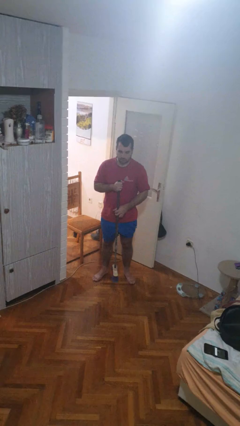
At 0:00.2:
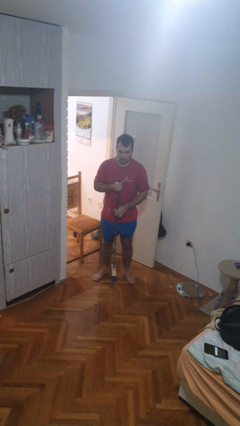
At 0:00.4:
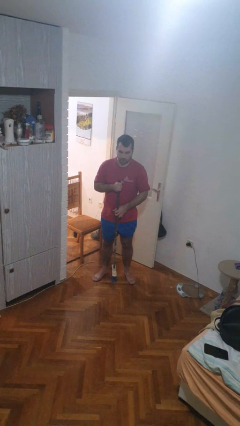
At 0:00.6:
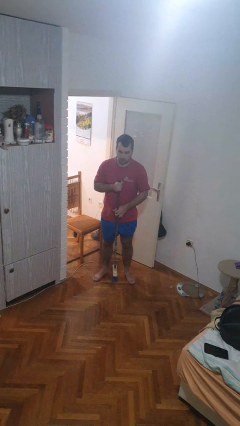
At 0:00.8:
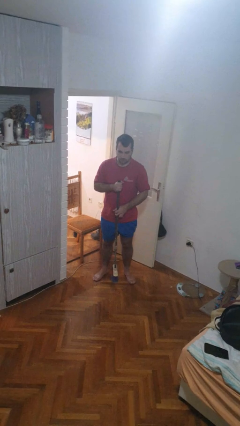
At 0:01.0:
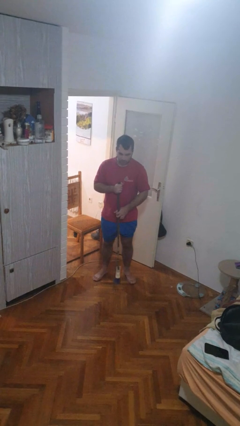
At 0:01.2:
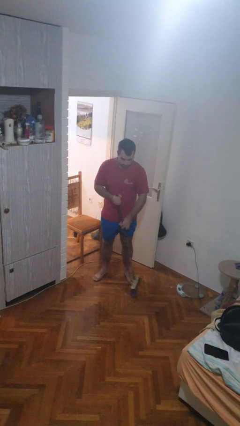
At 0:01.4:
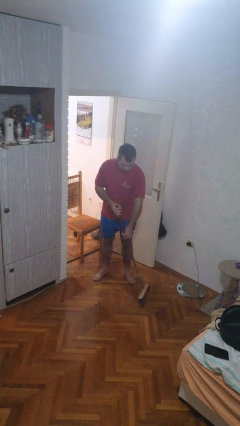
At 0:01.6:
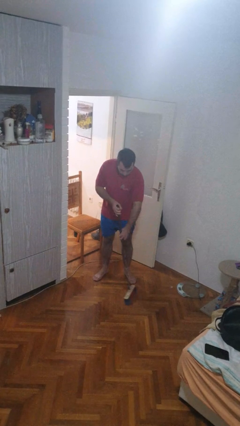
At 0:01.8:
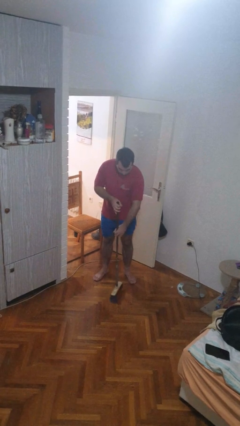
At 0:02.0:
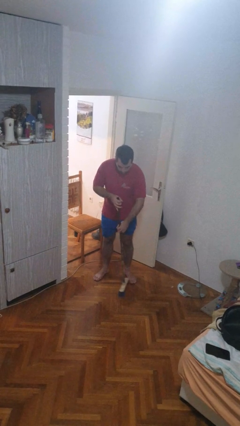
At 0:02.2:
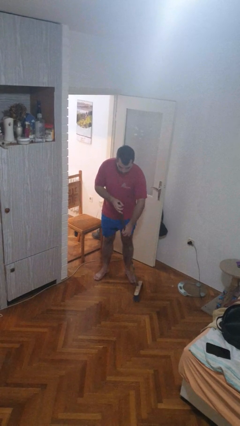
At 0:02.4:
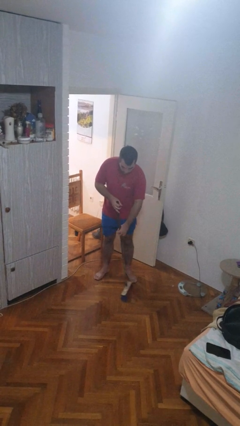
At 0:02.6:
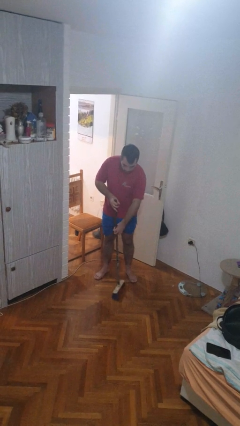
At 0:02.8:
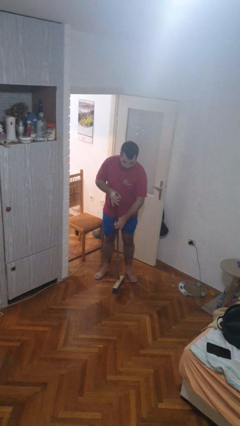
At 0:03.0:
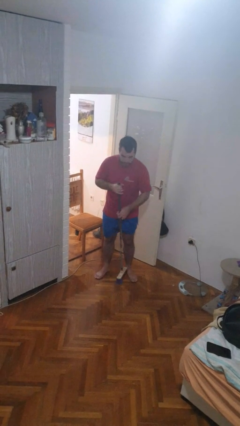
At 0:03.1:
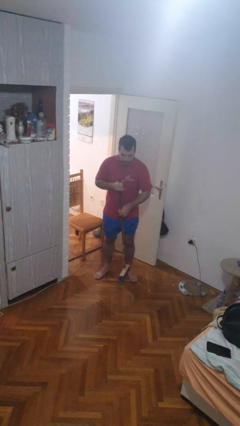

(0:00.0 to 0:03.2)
person sweeps floor

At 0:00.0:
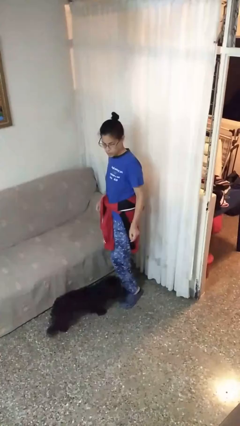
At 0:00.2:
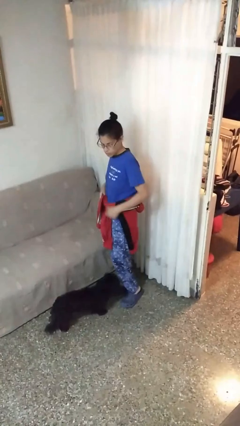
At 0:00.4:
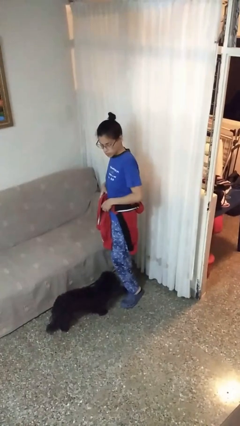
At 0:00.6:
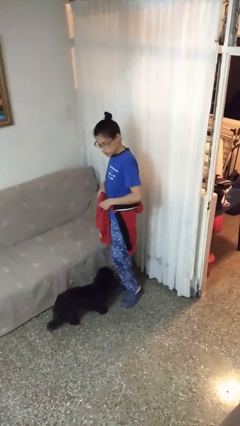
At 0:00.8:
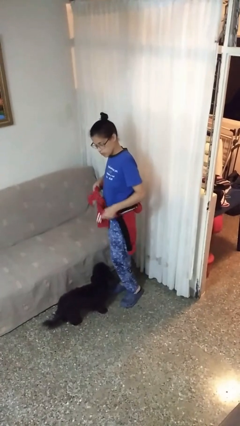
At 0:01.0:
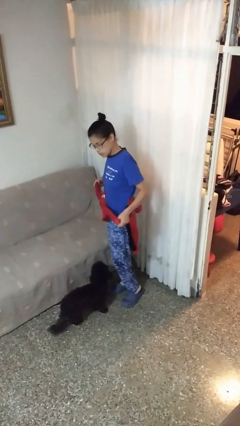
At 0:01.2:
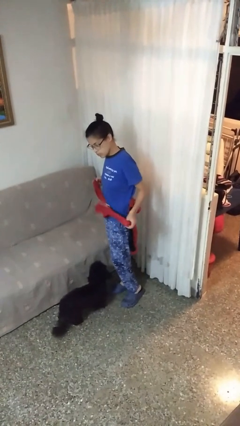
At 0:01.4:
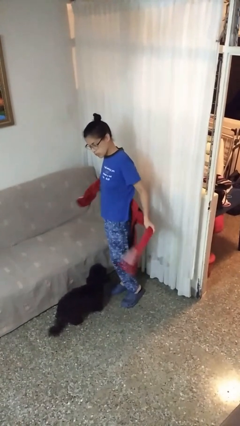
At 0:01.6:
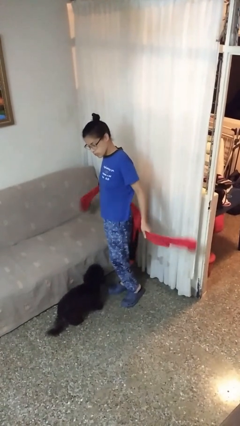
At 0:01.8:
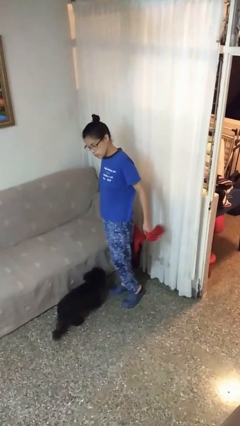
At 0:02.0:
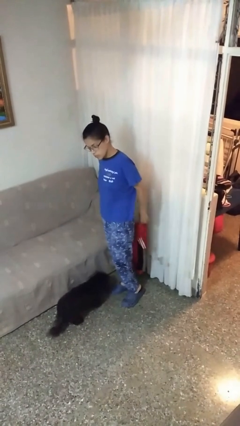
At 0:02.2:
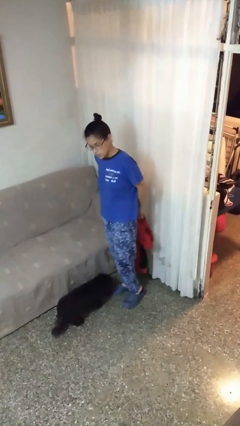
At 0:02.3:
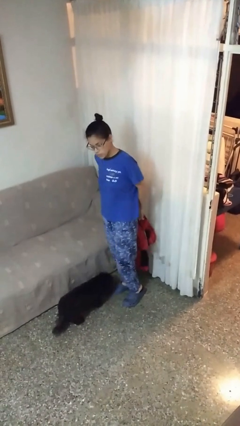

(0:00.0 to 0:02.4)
person unties jacket around waist

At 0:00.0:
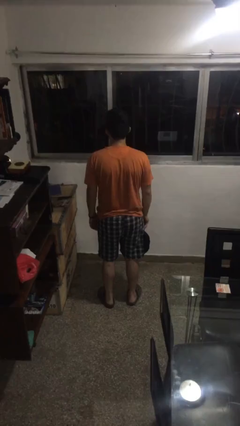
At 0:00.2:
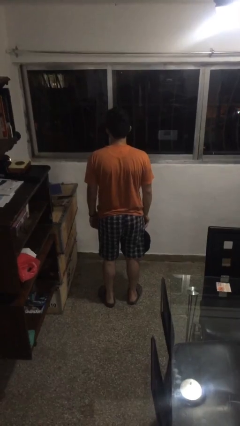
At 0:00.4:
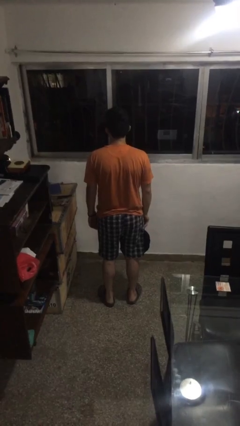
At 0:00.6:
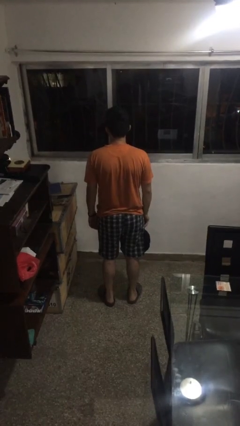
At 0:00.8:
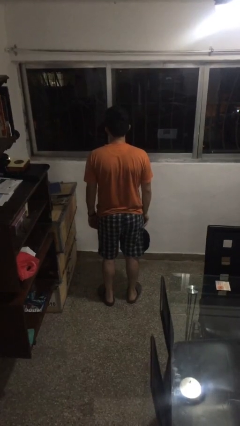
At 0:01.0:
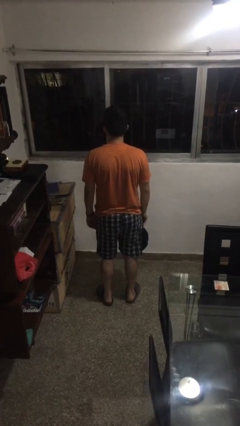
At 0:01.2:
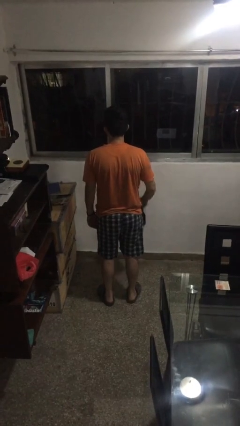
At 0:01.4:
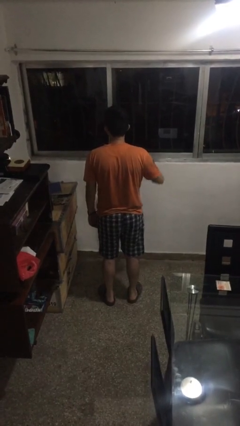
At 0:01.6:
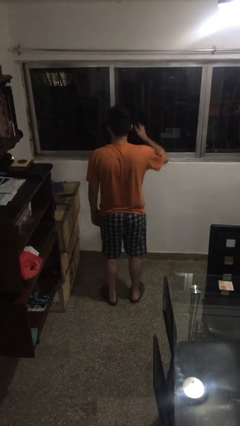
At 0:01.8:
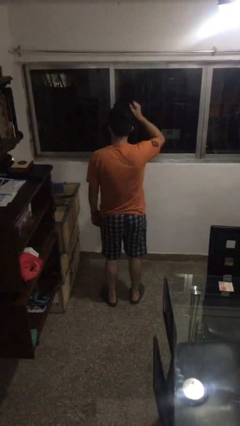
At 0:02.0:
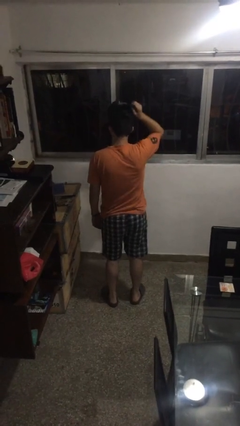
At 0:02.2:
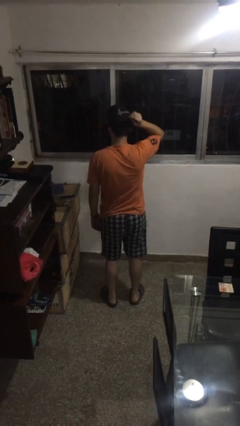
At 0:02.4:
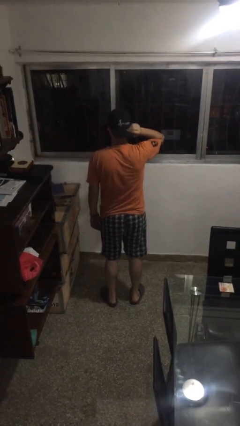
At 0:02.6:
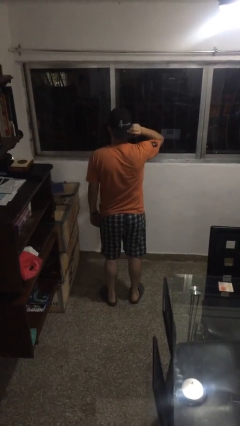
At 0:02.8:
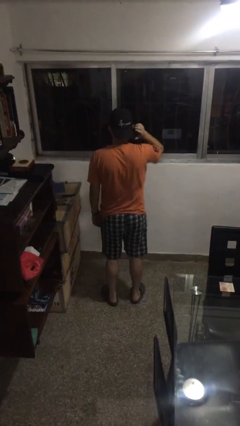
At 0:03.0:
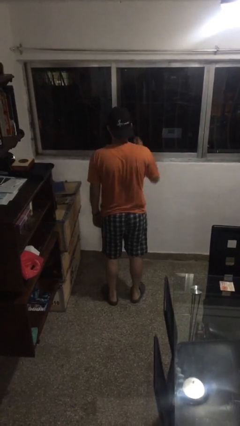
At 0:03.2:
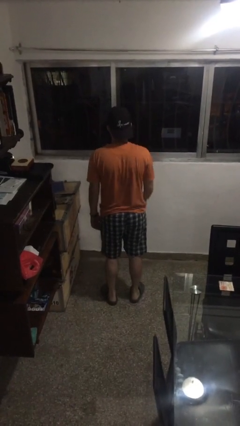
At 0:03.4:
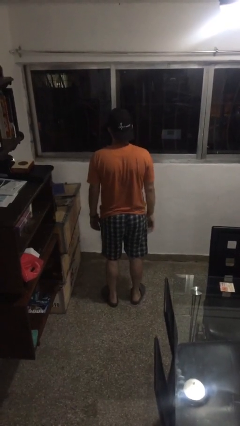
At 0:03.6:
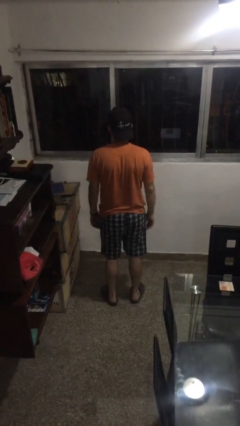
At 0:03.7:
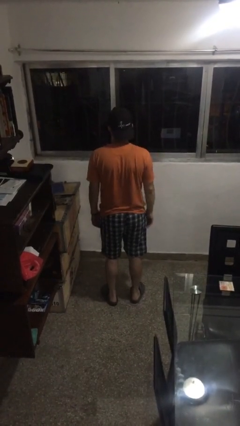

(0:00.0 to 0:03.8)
person puts on hat

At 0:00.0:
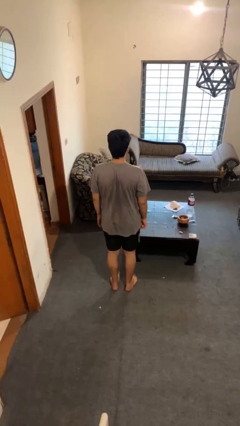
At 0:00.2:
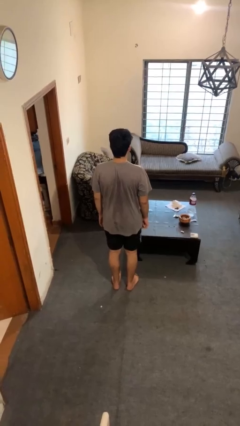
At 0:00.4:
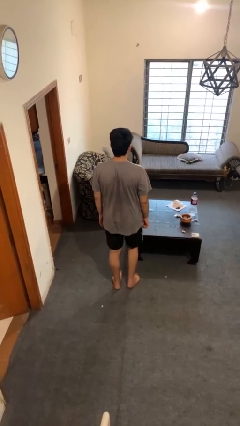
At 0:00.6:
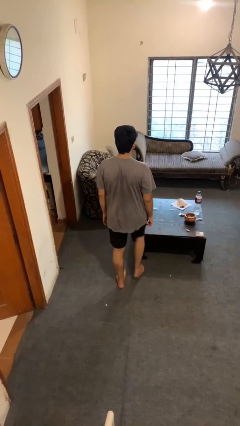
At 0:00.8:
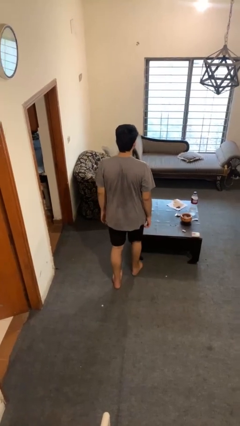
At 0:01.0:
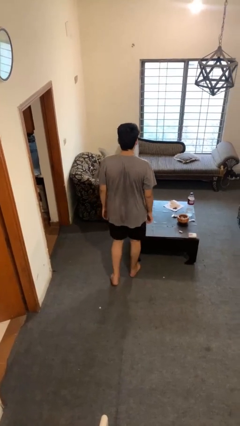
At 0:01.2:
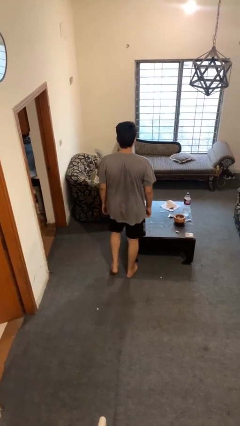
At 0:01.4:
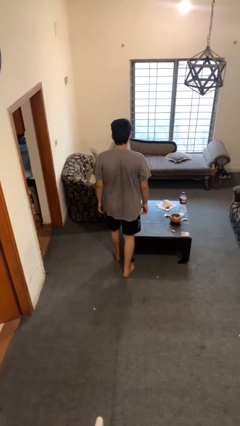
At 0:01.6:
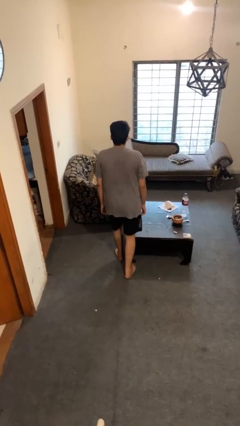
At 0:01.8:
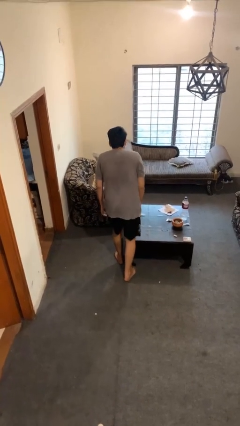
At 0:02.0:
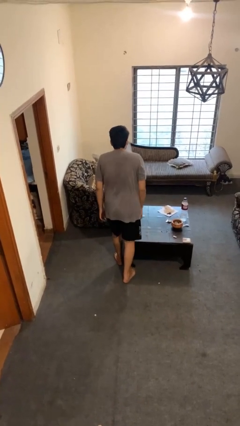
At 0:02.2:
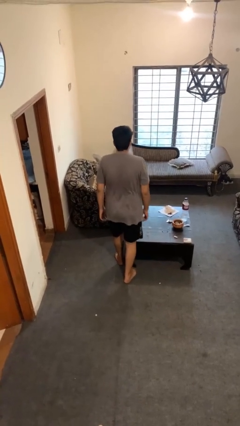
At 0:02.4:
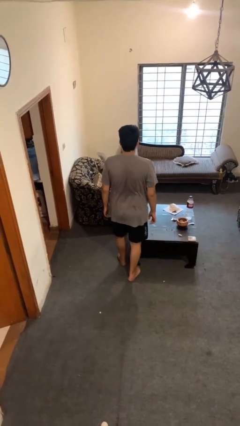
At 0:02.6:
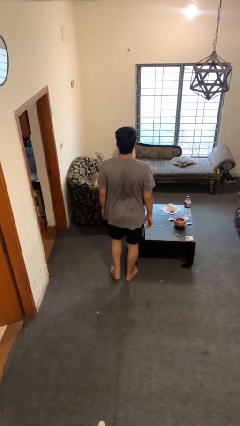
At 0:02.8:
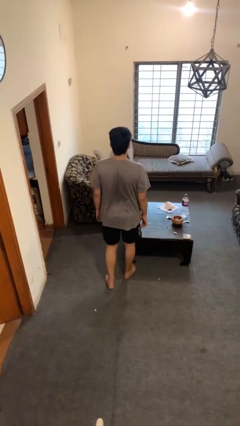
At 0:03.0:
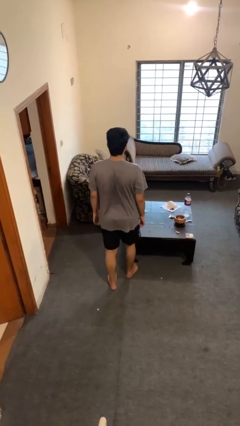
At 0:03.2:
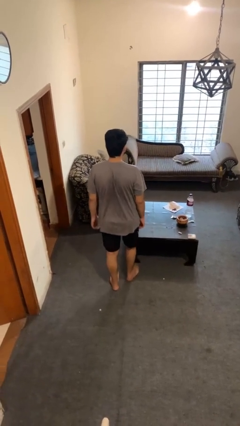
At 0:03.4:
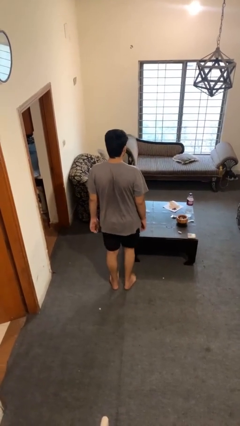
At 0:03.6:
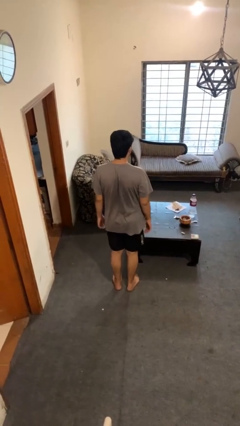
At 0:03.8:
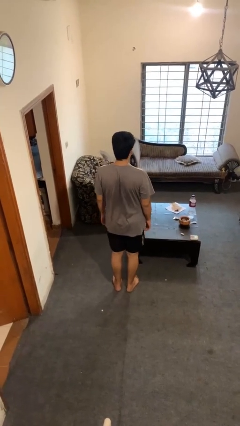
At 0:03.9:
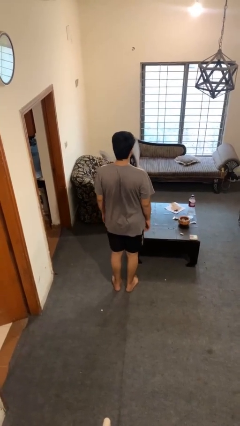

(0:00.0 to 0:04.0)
person bumps into table

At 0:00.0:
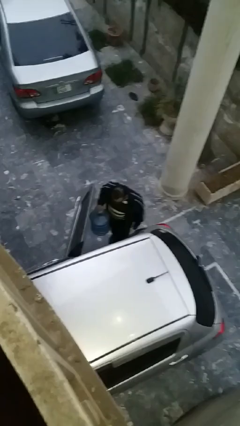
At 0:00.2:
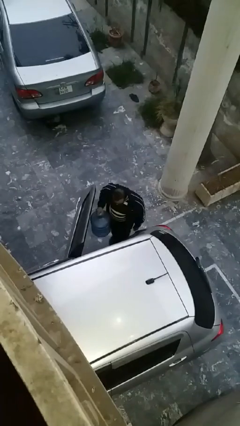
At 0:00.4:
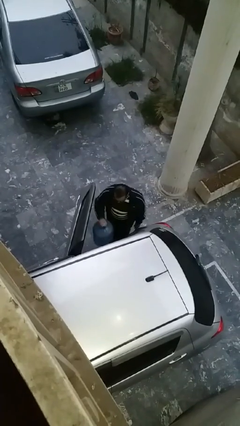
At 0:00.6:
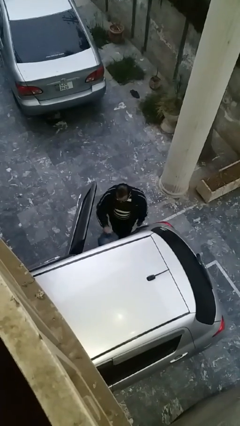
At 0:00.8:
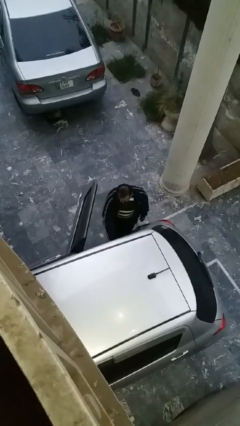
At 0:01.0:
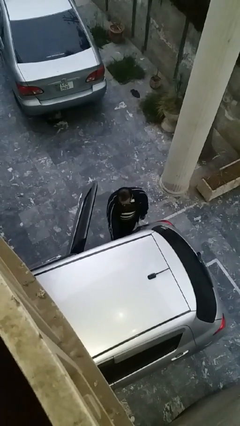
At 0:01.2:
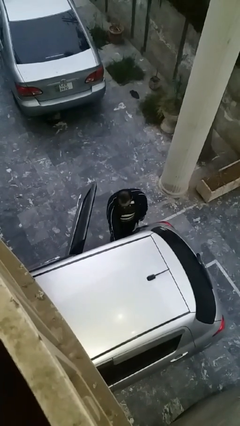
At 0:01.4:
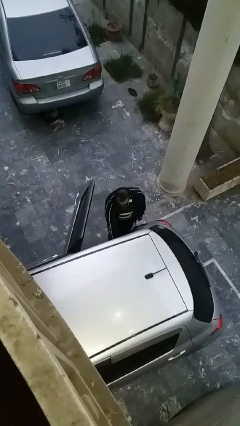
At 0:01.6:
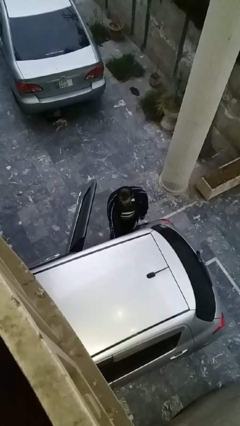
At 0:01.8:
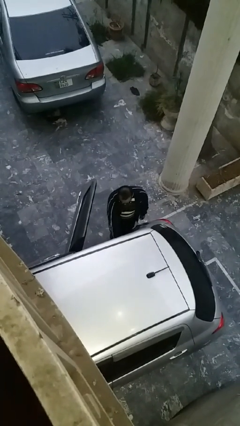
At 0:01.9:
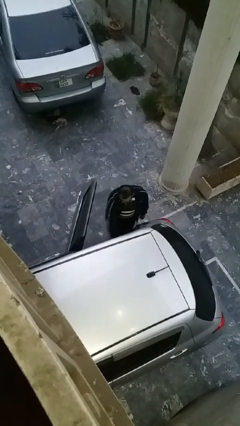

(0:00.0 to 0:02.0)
person loads car

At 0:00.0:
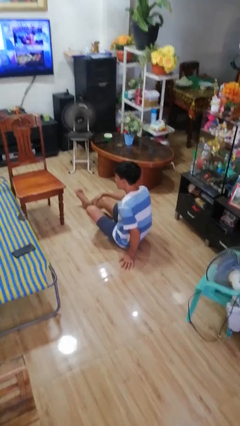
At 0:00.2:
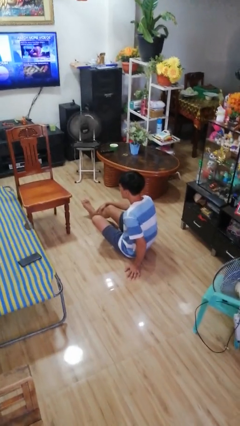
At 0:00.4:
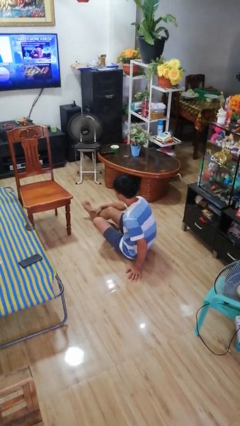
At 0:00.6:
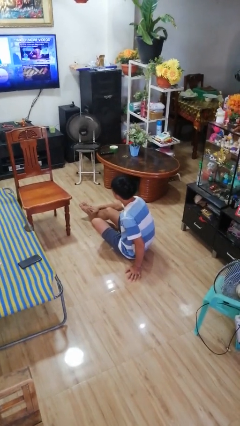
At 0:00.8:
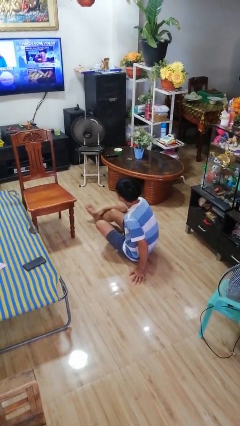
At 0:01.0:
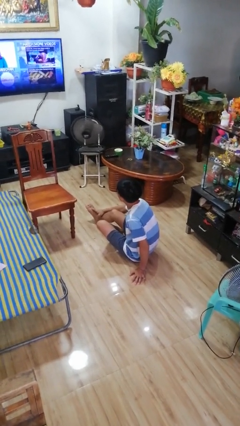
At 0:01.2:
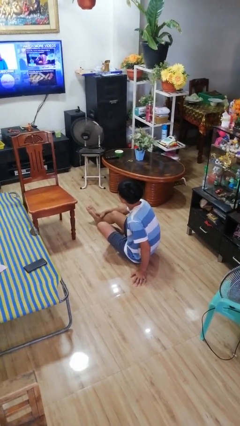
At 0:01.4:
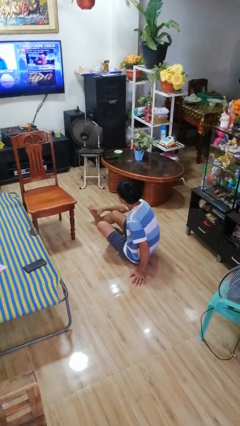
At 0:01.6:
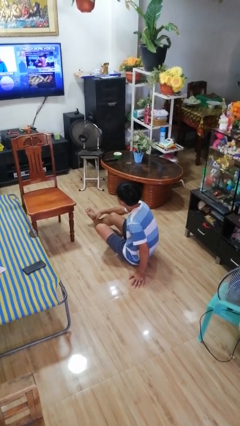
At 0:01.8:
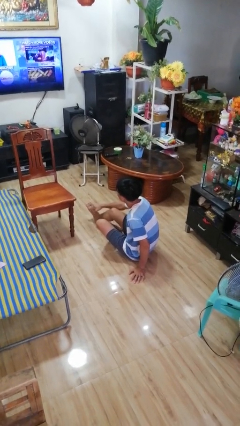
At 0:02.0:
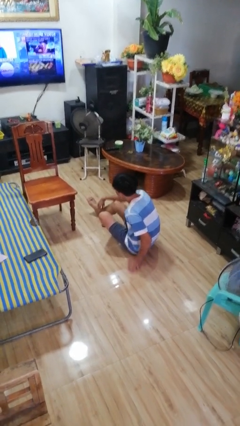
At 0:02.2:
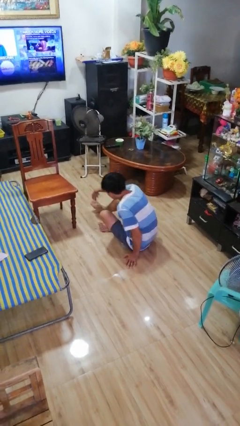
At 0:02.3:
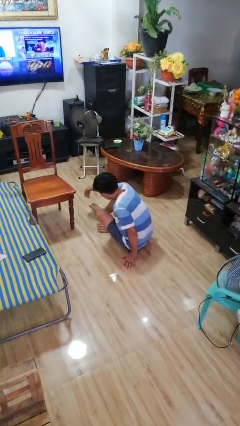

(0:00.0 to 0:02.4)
person lies down on floor
